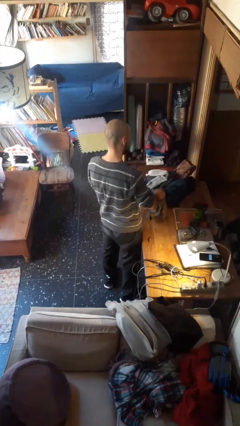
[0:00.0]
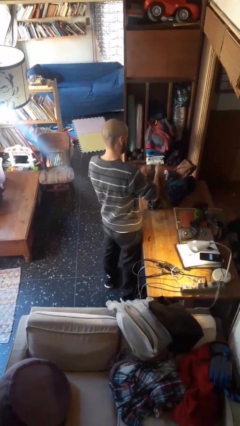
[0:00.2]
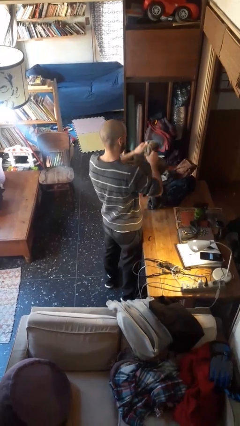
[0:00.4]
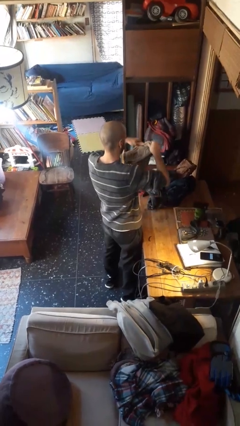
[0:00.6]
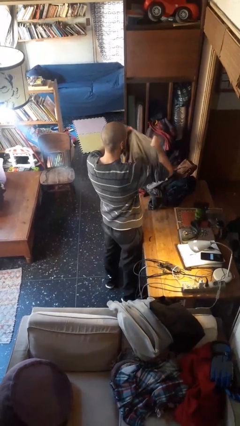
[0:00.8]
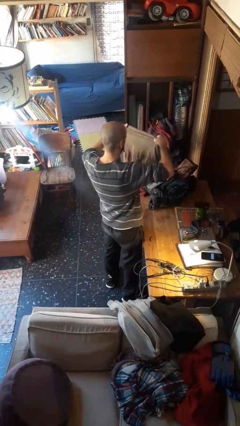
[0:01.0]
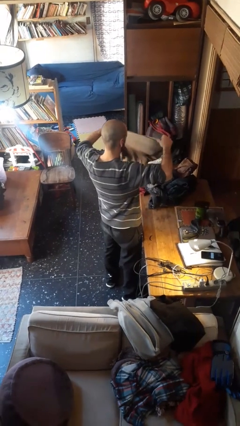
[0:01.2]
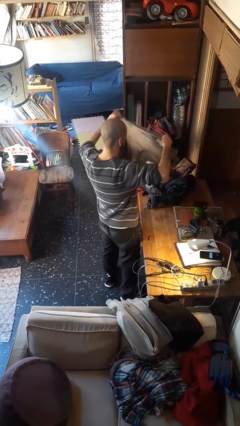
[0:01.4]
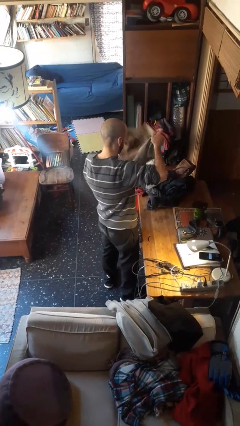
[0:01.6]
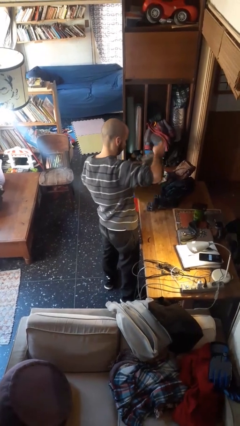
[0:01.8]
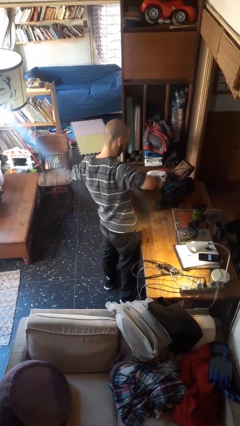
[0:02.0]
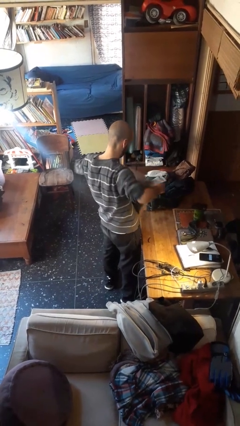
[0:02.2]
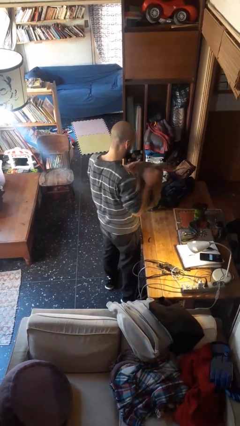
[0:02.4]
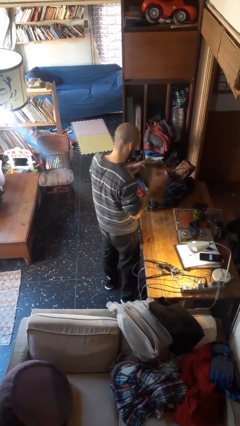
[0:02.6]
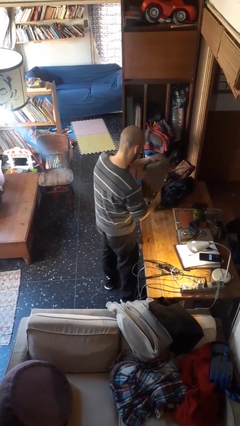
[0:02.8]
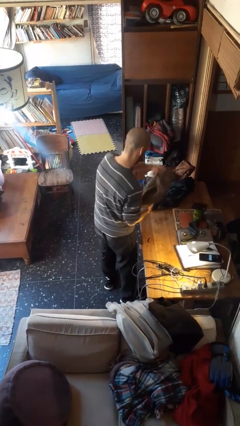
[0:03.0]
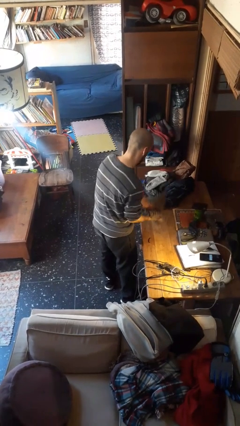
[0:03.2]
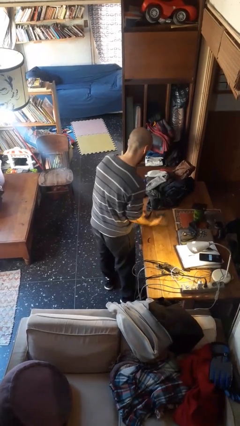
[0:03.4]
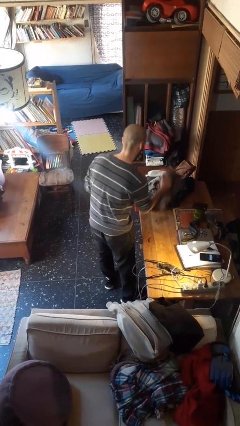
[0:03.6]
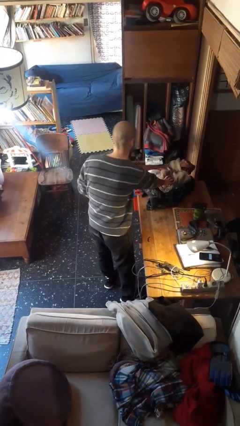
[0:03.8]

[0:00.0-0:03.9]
person folds shirt

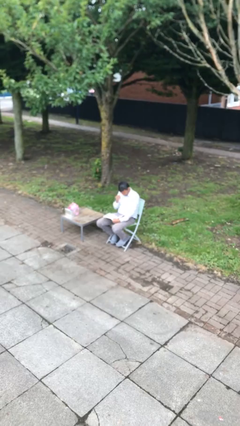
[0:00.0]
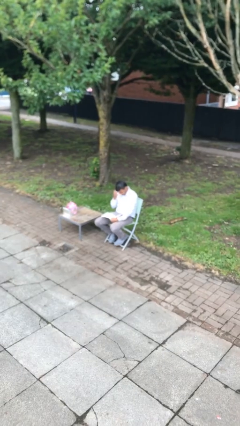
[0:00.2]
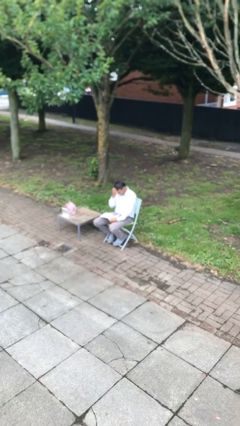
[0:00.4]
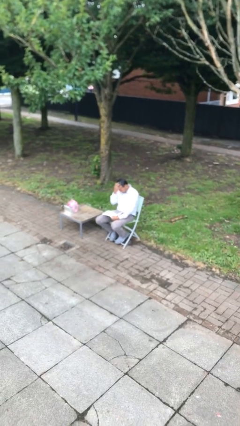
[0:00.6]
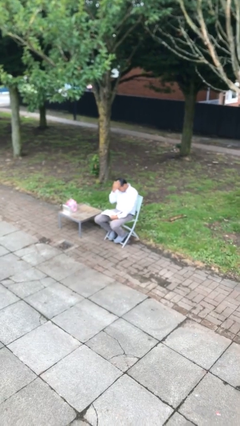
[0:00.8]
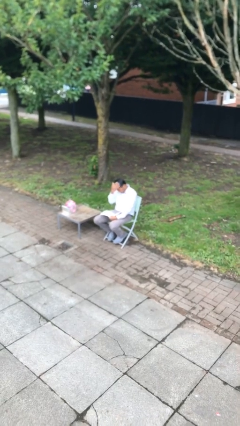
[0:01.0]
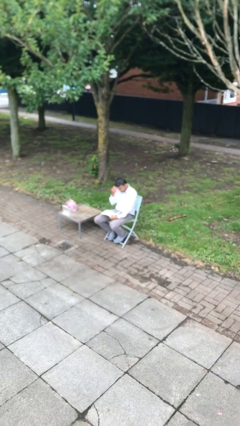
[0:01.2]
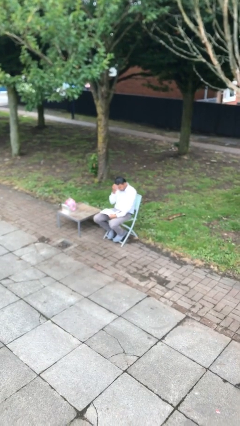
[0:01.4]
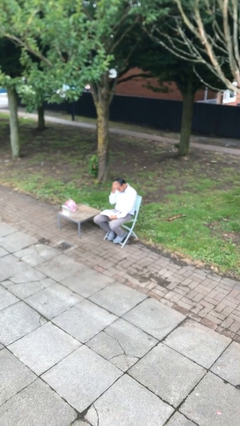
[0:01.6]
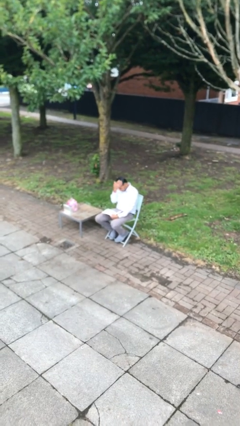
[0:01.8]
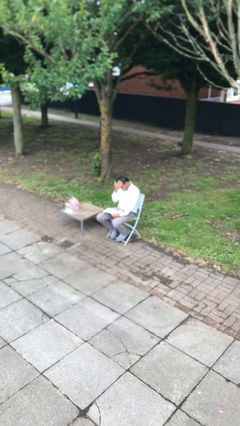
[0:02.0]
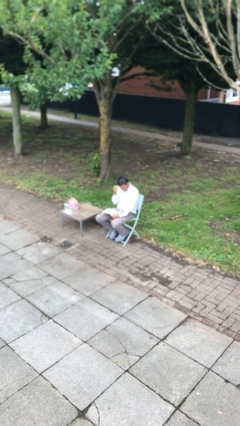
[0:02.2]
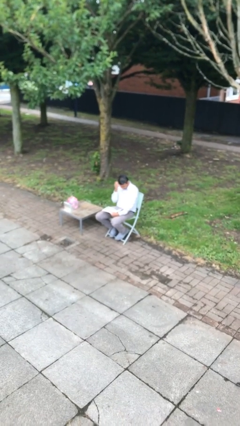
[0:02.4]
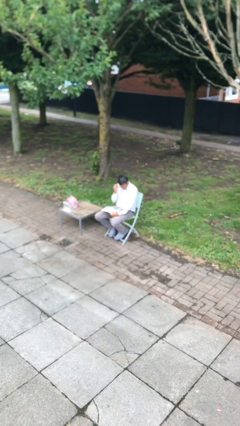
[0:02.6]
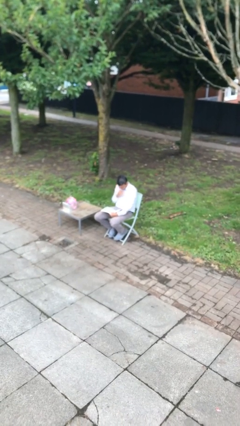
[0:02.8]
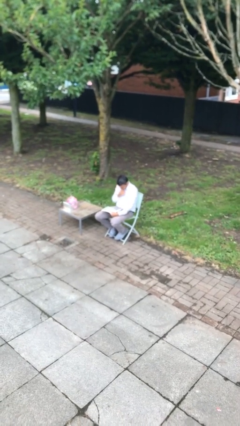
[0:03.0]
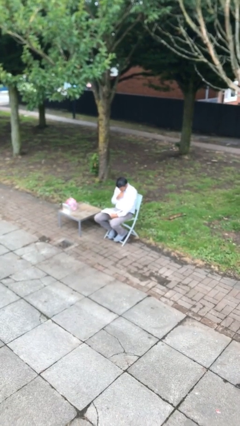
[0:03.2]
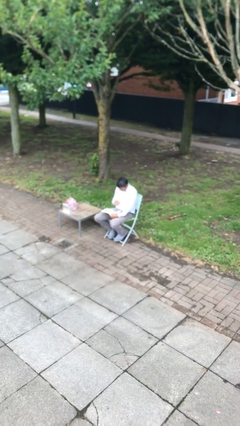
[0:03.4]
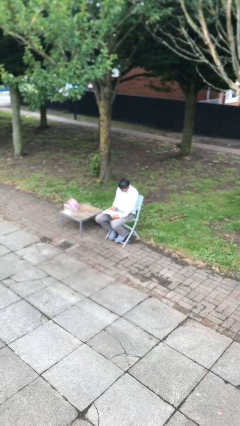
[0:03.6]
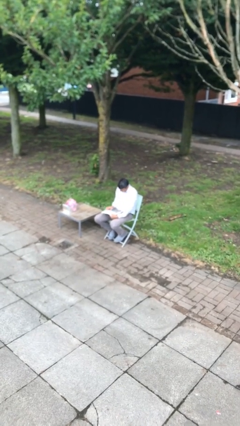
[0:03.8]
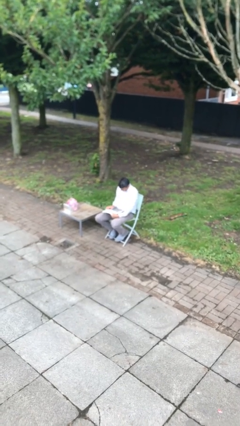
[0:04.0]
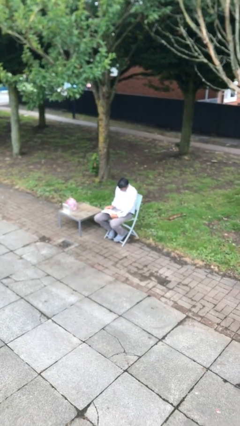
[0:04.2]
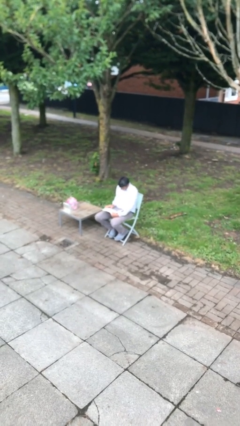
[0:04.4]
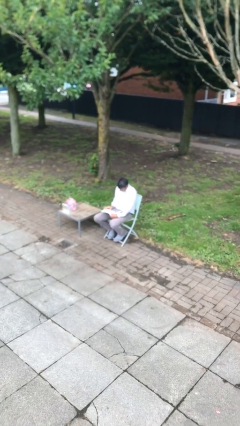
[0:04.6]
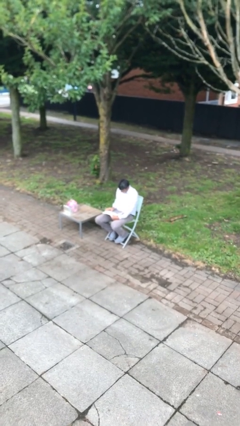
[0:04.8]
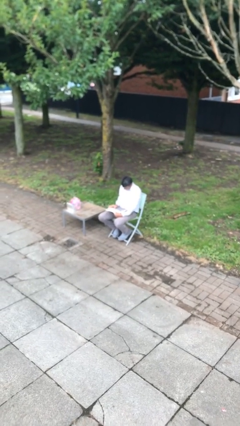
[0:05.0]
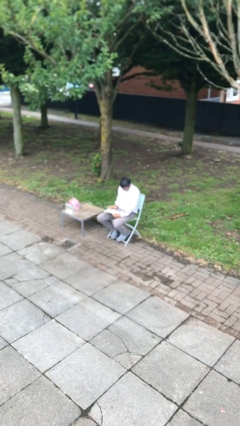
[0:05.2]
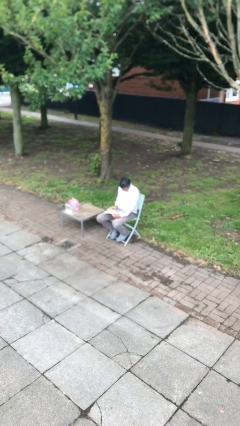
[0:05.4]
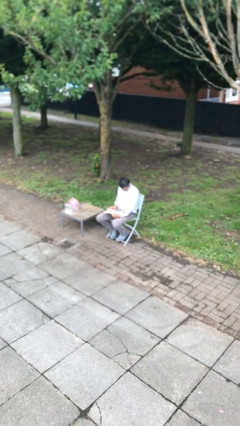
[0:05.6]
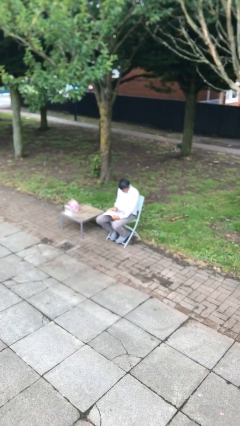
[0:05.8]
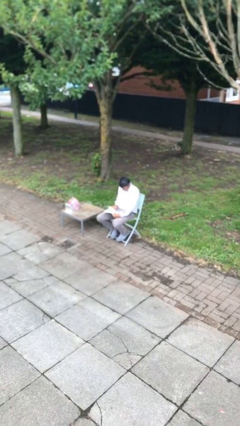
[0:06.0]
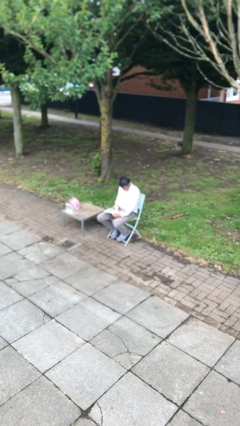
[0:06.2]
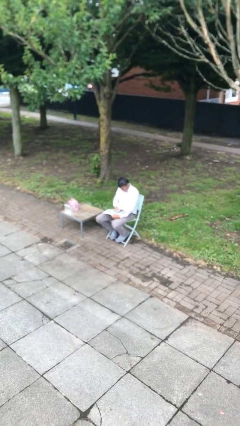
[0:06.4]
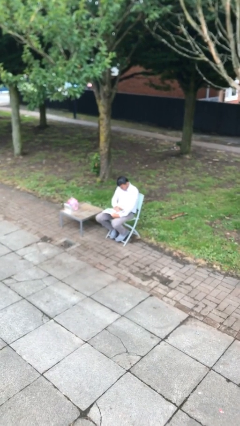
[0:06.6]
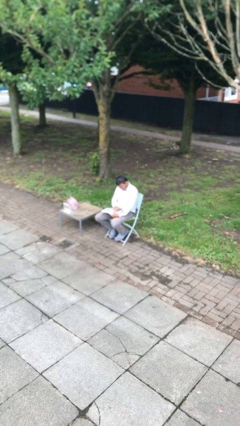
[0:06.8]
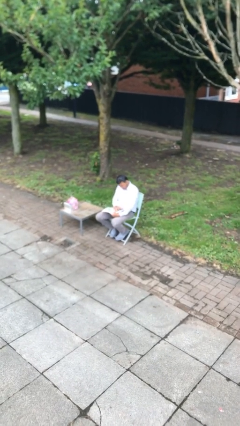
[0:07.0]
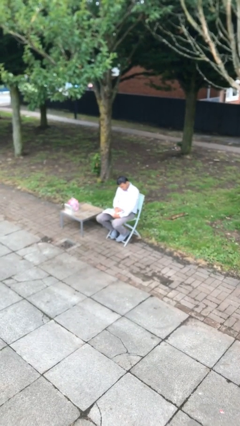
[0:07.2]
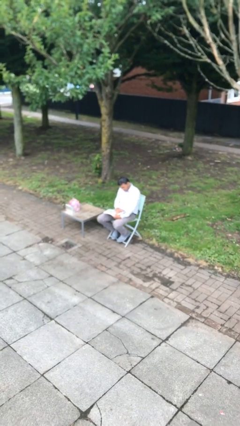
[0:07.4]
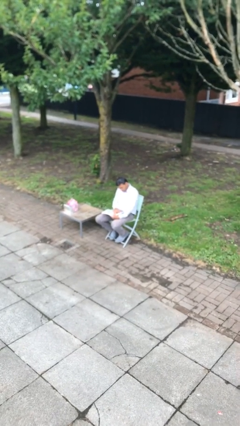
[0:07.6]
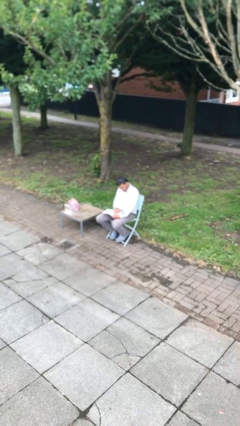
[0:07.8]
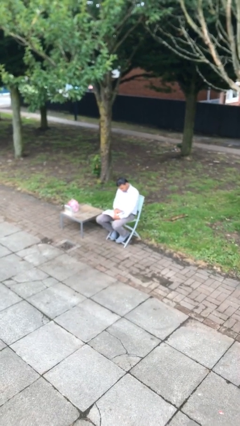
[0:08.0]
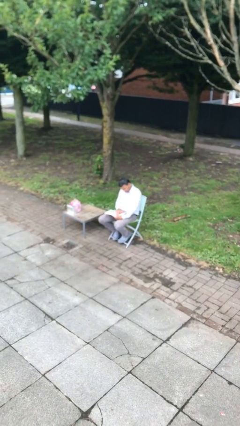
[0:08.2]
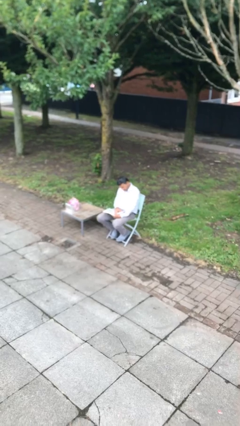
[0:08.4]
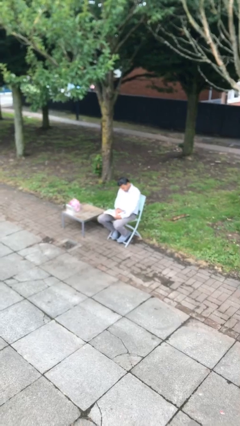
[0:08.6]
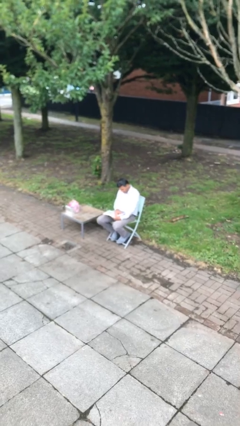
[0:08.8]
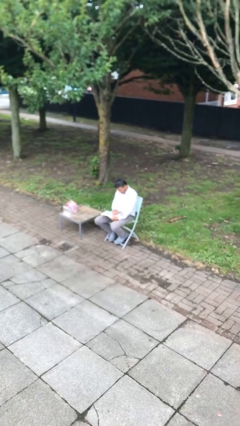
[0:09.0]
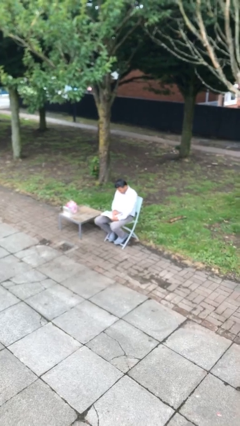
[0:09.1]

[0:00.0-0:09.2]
person reads document

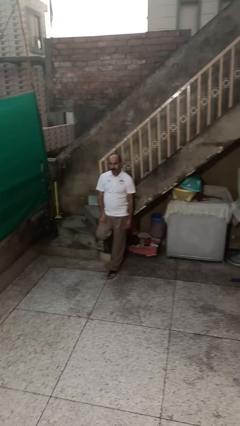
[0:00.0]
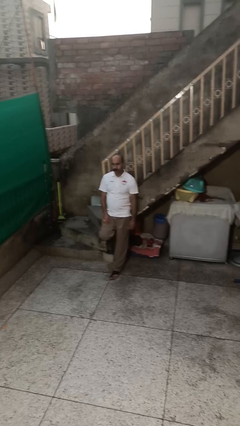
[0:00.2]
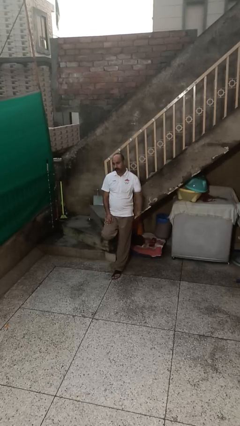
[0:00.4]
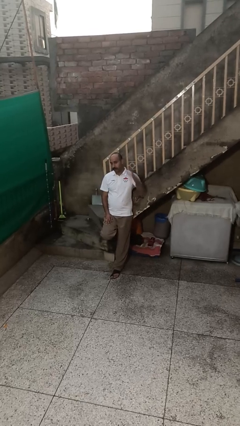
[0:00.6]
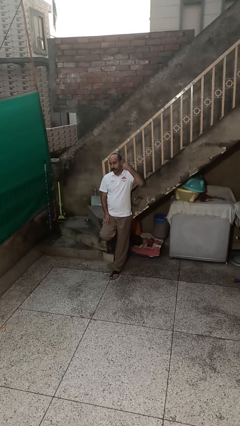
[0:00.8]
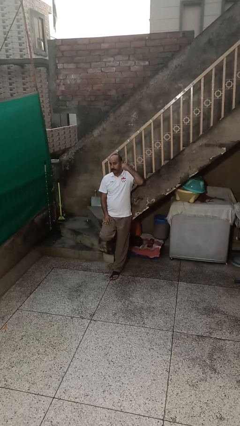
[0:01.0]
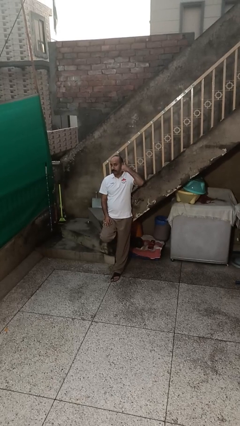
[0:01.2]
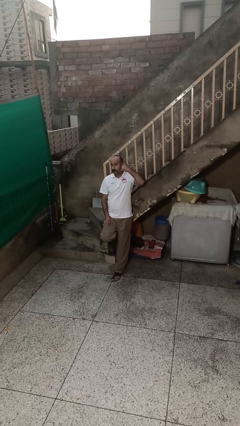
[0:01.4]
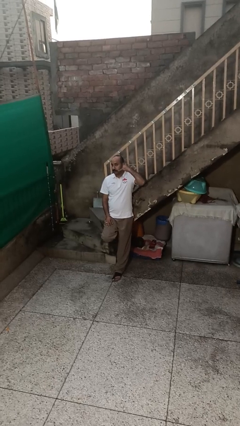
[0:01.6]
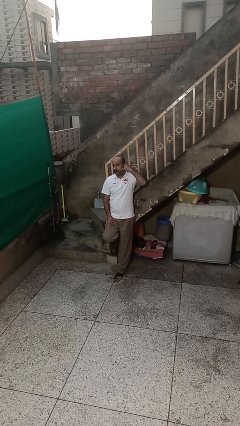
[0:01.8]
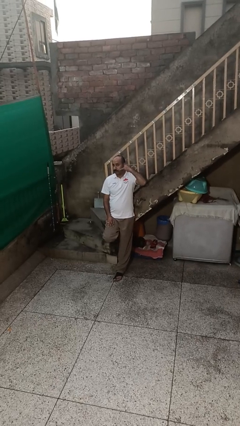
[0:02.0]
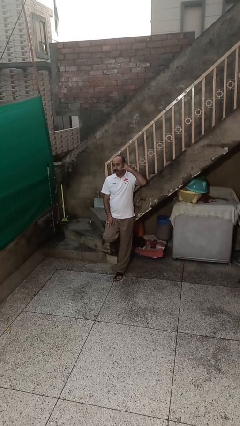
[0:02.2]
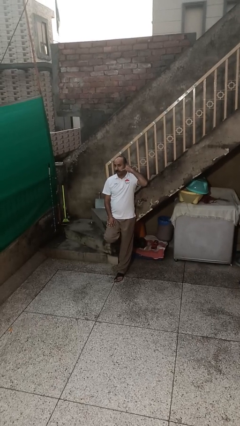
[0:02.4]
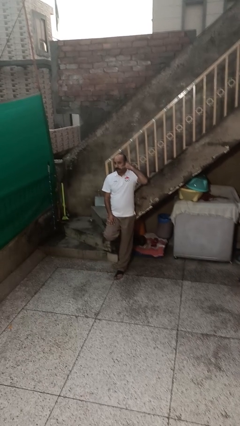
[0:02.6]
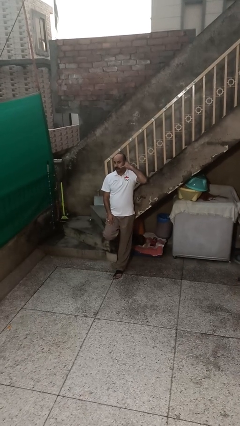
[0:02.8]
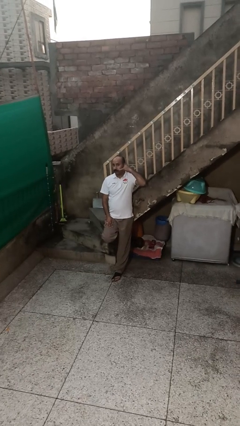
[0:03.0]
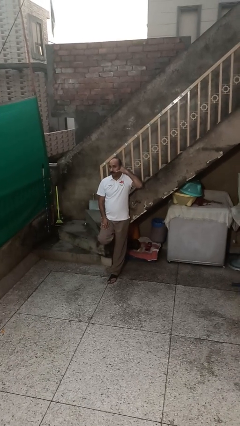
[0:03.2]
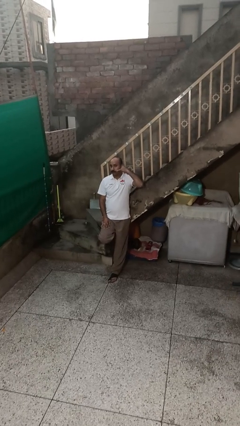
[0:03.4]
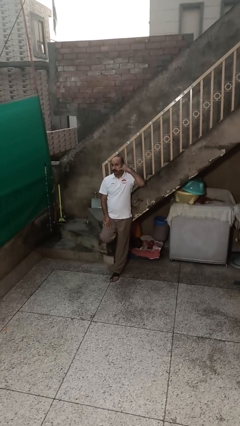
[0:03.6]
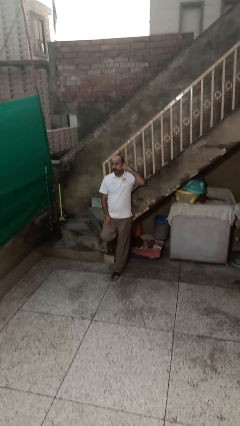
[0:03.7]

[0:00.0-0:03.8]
person gestures call me

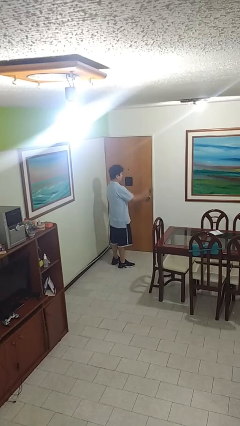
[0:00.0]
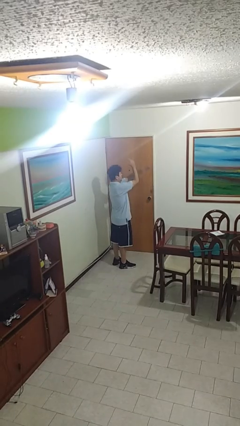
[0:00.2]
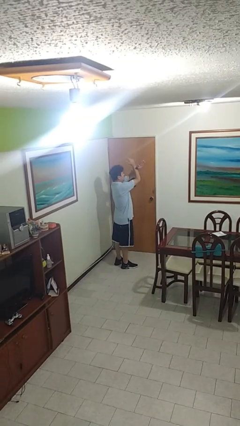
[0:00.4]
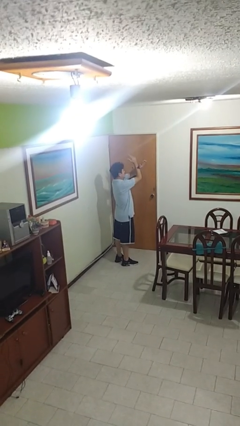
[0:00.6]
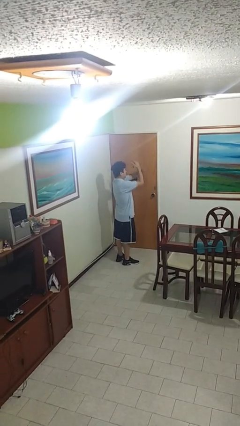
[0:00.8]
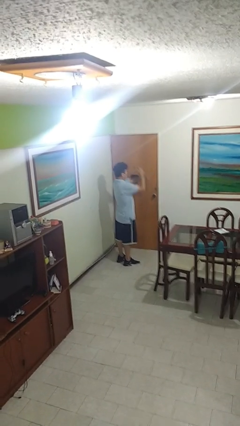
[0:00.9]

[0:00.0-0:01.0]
person gestures arms x
